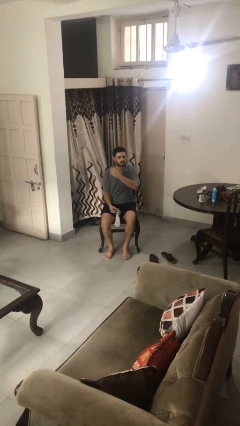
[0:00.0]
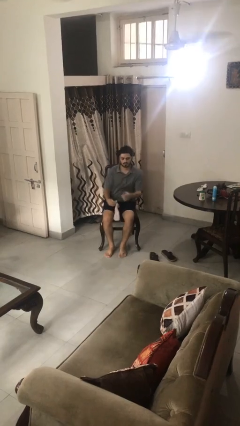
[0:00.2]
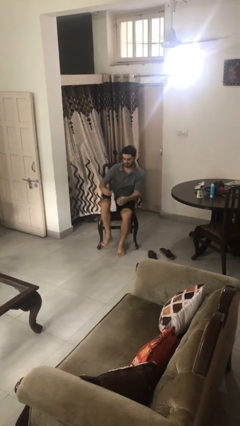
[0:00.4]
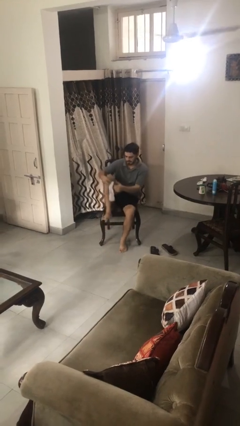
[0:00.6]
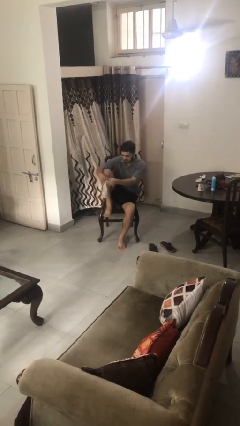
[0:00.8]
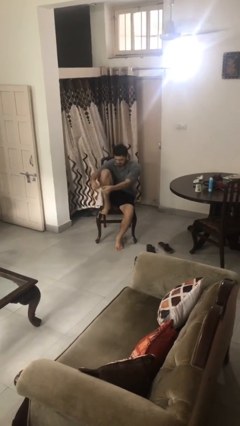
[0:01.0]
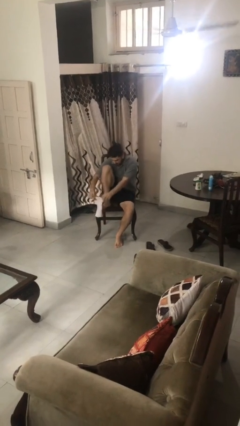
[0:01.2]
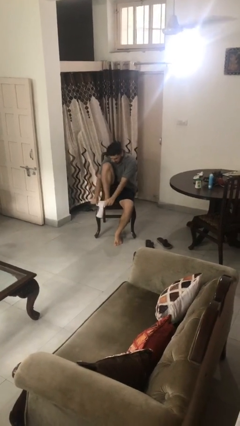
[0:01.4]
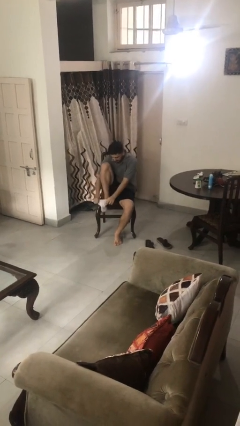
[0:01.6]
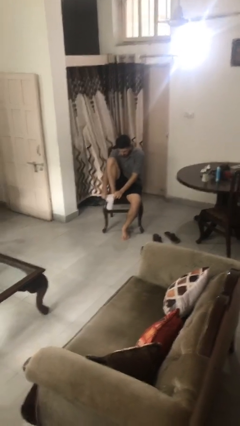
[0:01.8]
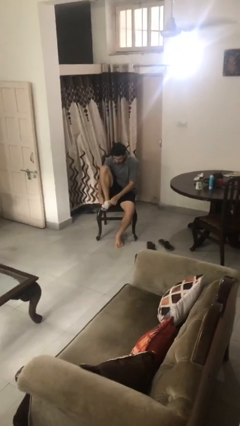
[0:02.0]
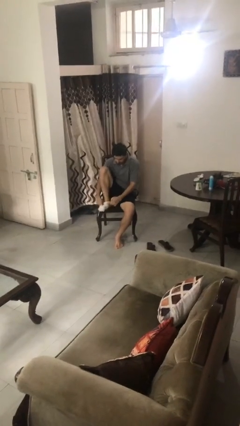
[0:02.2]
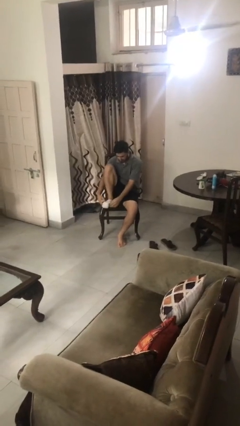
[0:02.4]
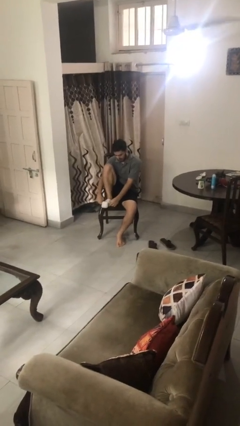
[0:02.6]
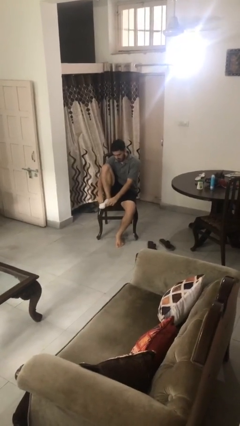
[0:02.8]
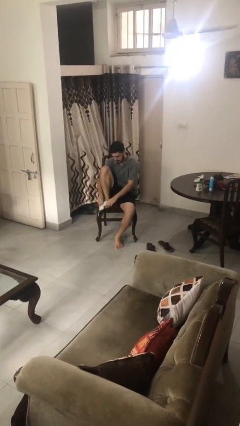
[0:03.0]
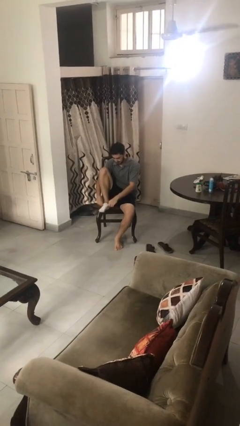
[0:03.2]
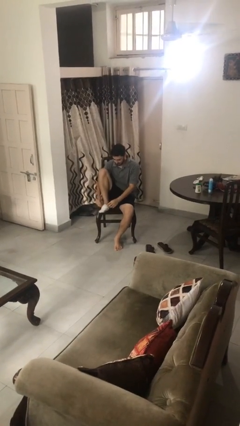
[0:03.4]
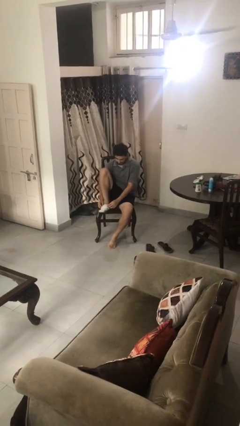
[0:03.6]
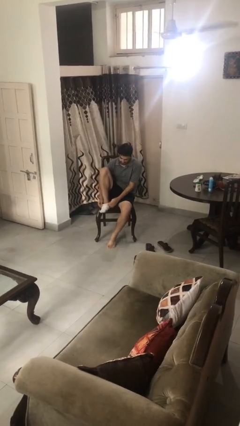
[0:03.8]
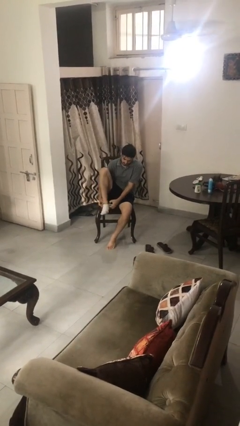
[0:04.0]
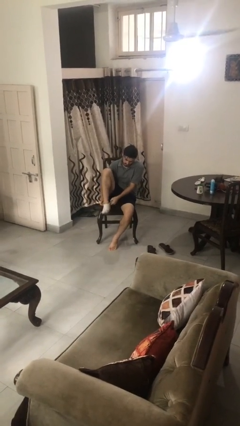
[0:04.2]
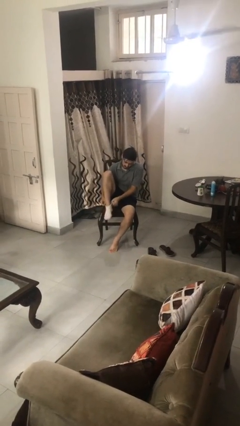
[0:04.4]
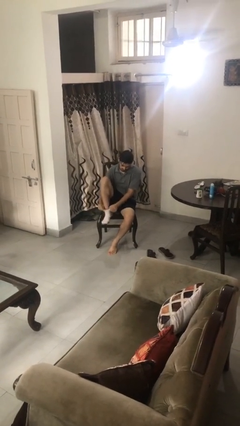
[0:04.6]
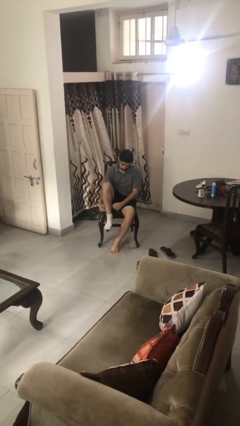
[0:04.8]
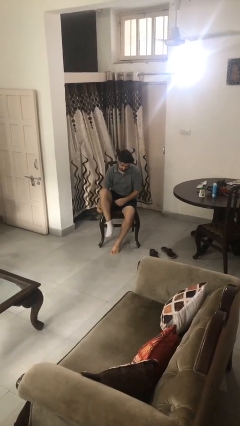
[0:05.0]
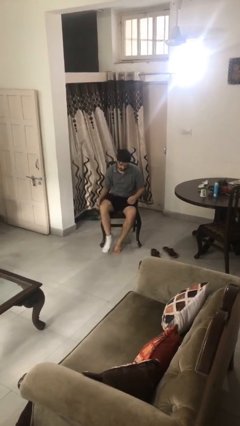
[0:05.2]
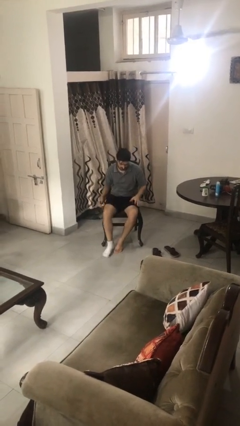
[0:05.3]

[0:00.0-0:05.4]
person puts on socks

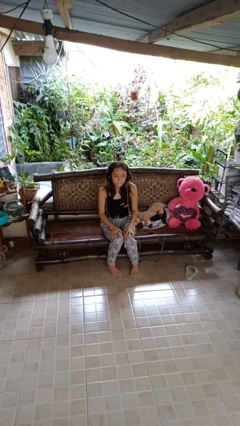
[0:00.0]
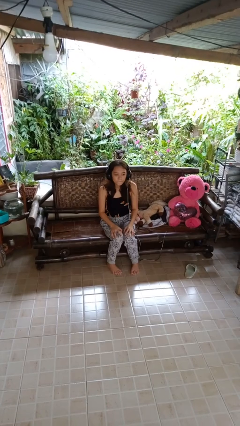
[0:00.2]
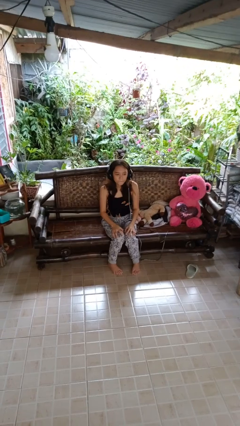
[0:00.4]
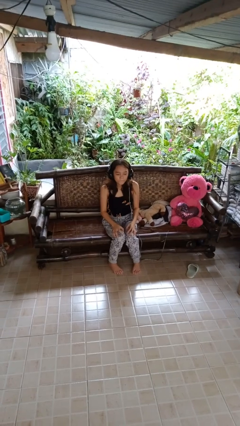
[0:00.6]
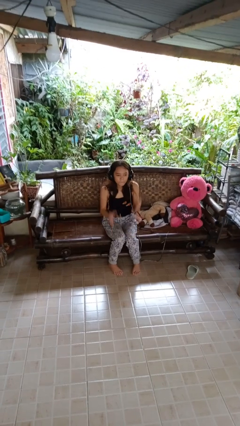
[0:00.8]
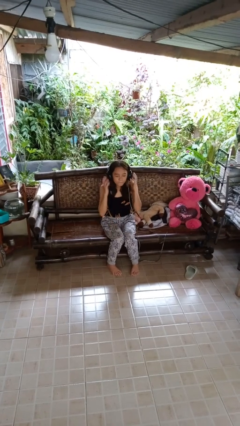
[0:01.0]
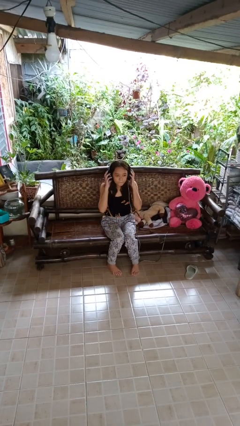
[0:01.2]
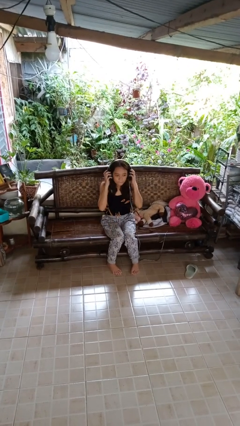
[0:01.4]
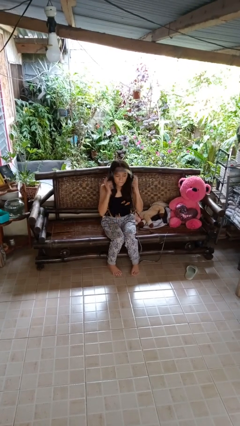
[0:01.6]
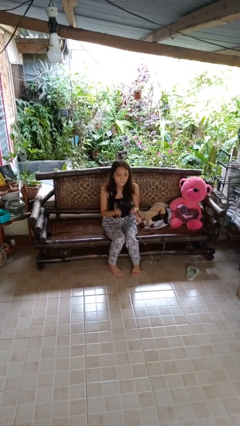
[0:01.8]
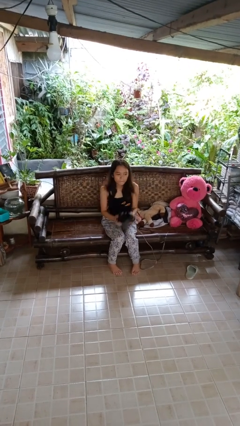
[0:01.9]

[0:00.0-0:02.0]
person takes off headphones

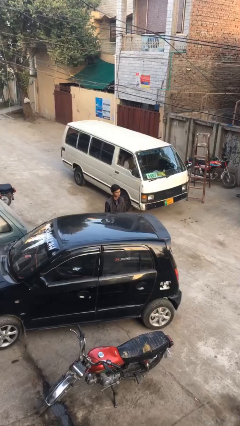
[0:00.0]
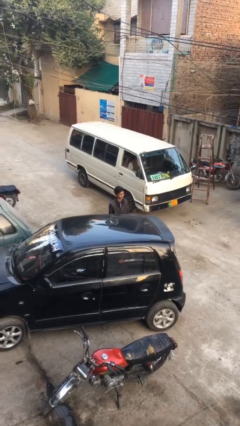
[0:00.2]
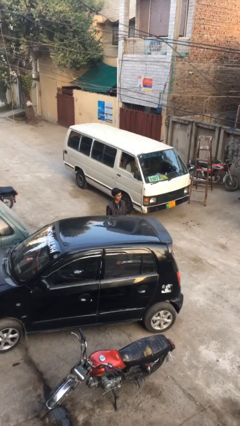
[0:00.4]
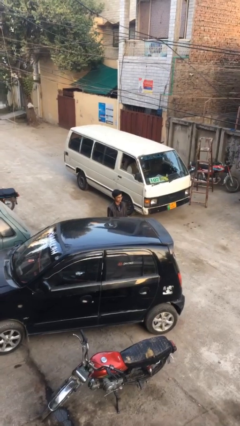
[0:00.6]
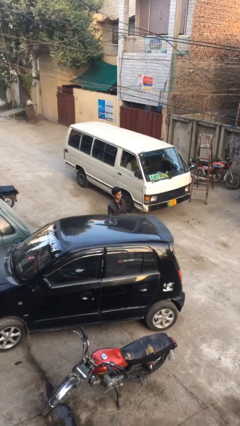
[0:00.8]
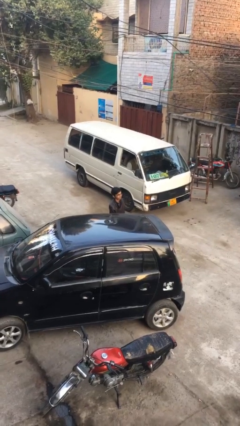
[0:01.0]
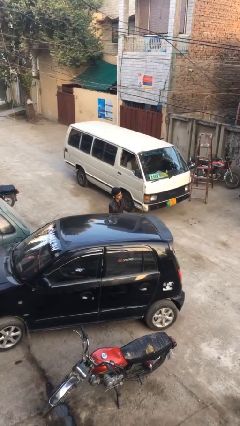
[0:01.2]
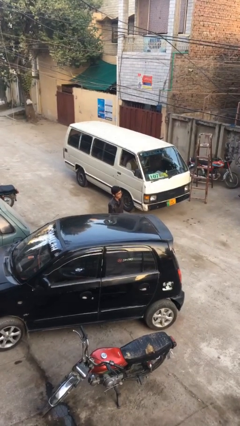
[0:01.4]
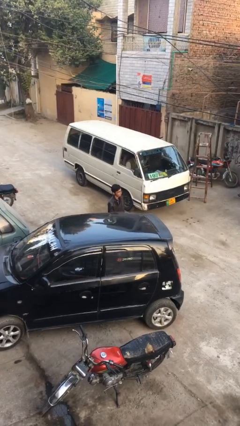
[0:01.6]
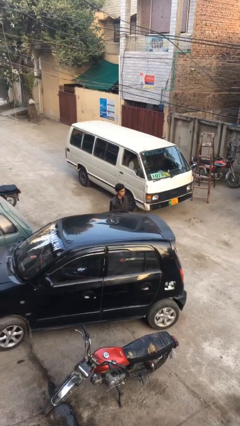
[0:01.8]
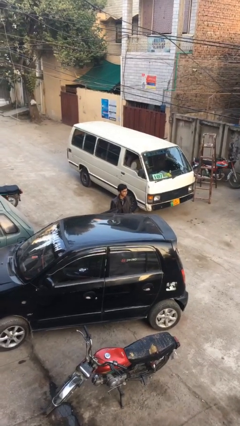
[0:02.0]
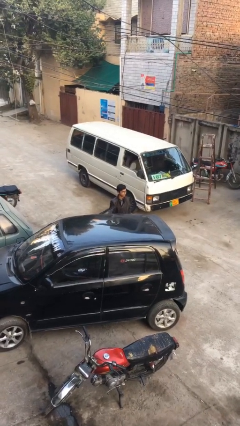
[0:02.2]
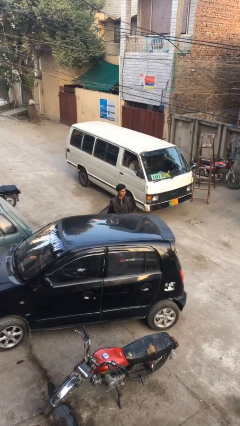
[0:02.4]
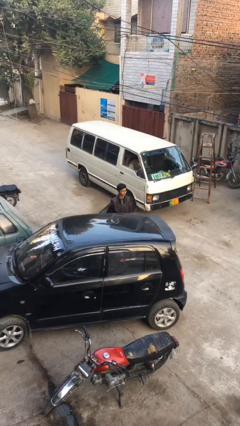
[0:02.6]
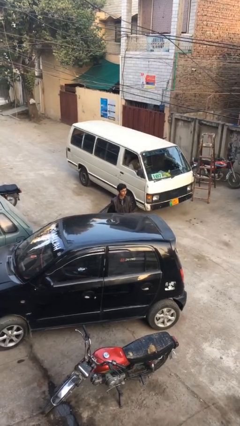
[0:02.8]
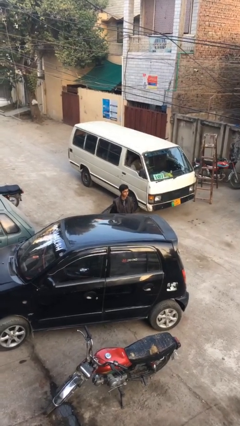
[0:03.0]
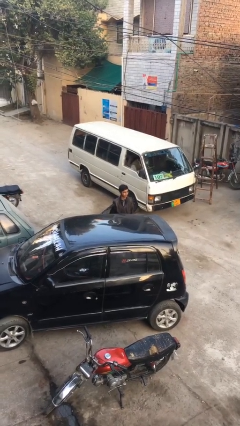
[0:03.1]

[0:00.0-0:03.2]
person opens car door

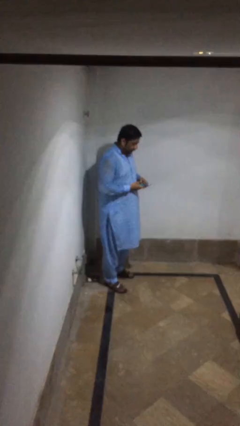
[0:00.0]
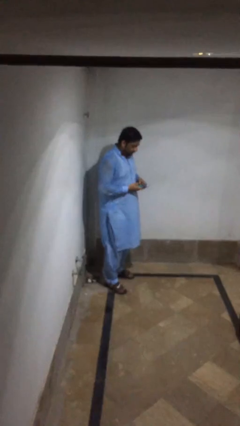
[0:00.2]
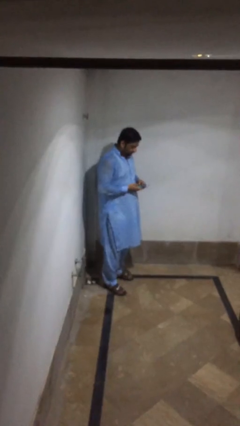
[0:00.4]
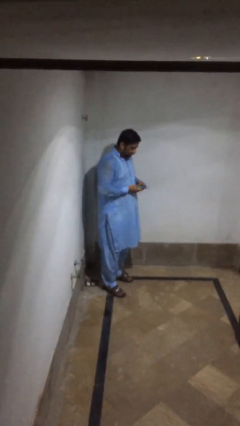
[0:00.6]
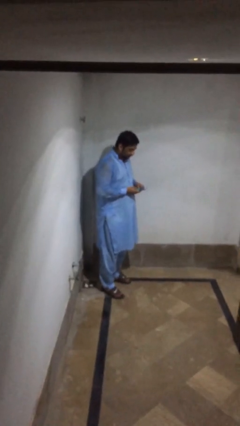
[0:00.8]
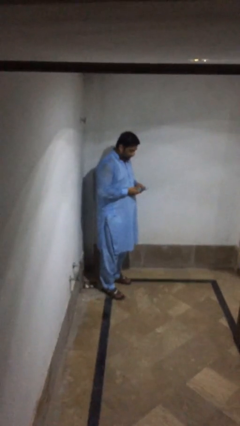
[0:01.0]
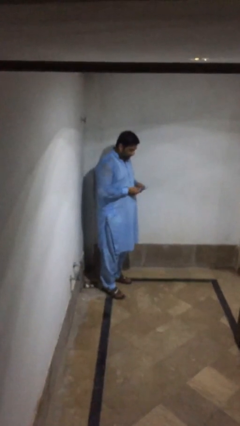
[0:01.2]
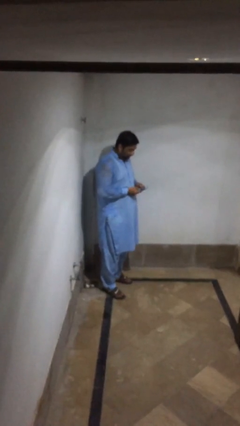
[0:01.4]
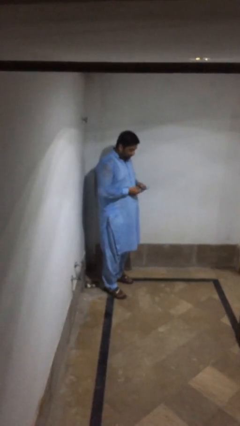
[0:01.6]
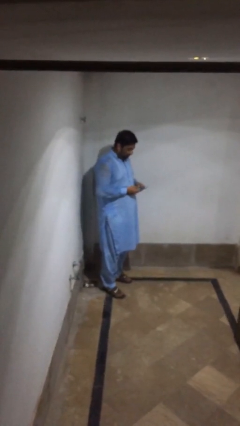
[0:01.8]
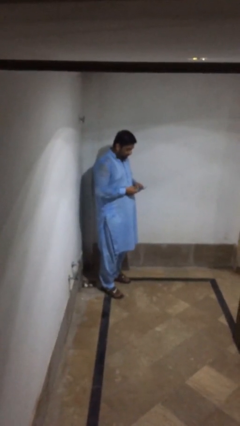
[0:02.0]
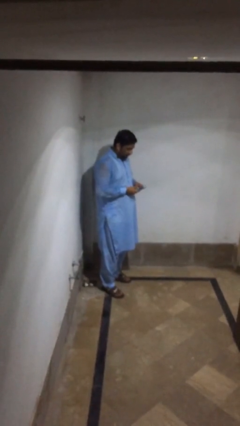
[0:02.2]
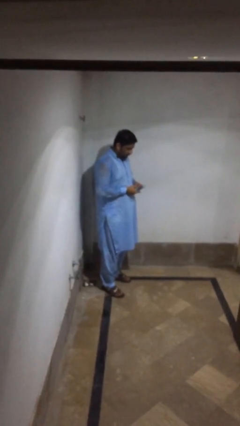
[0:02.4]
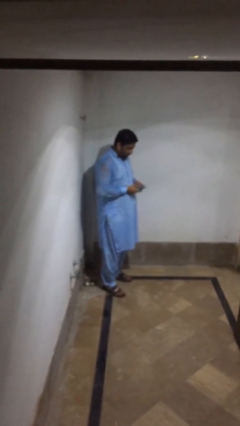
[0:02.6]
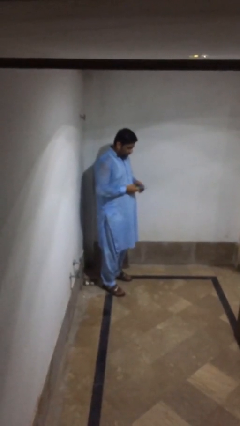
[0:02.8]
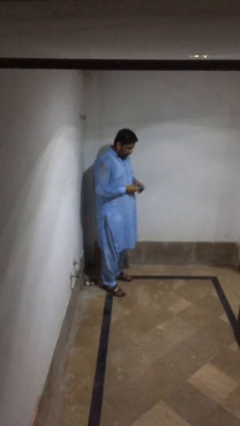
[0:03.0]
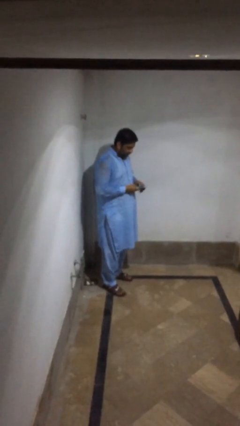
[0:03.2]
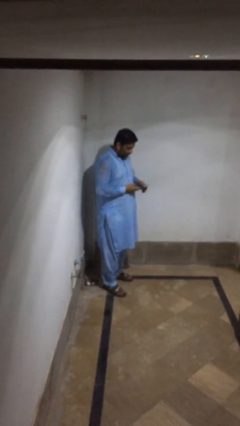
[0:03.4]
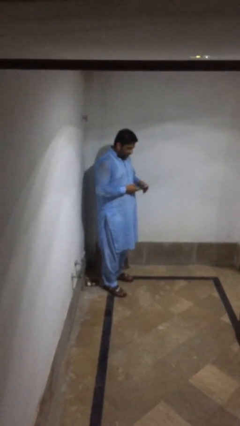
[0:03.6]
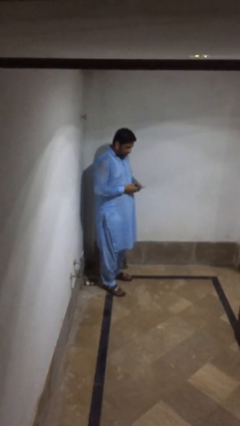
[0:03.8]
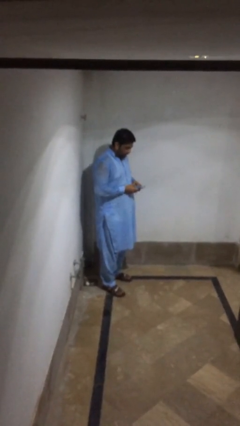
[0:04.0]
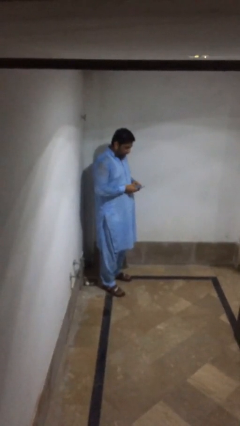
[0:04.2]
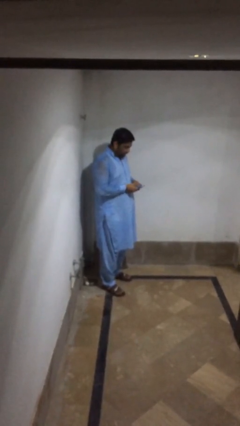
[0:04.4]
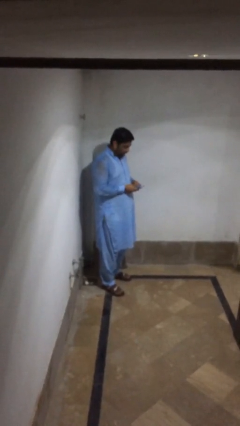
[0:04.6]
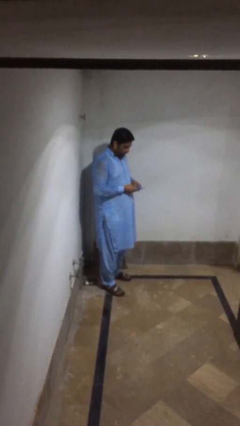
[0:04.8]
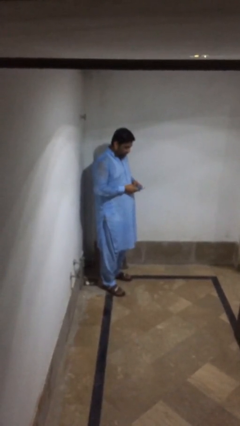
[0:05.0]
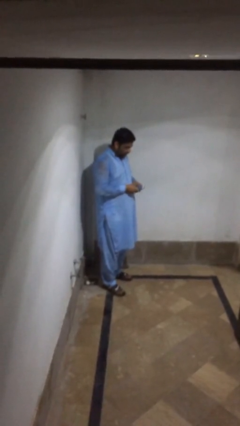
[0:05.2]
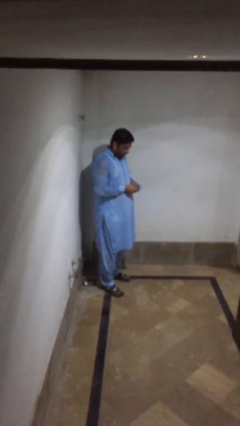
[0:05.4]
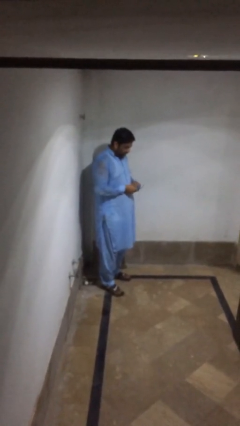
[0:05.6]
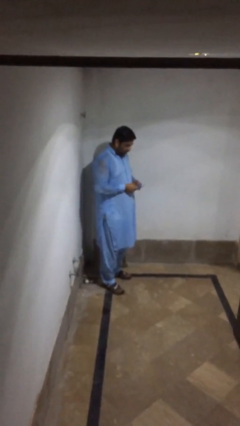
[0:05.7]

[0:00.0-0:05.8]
person texts on phone

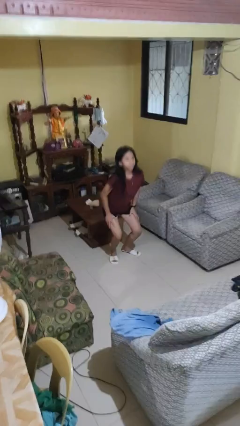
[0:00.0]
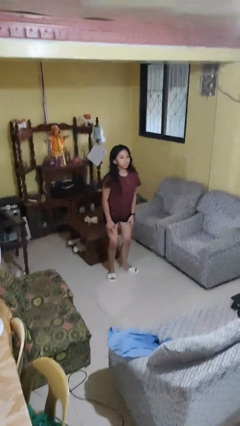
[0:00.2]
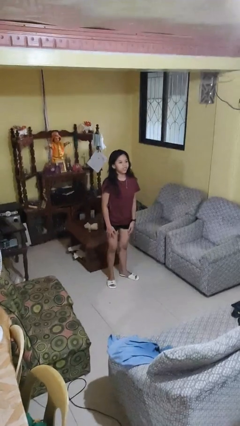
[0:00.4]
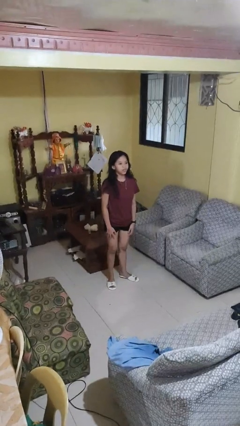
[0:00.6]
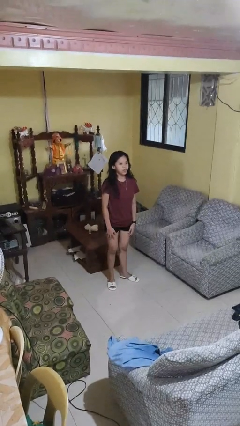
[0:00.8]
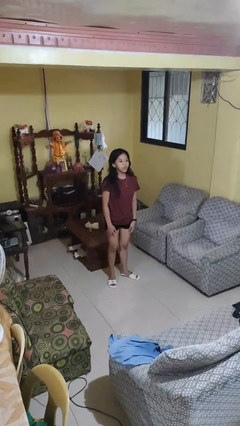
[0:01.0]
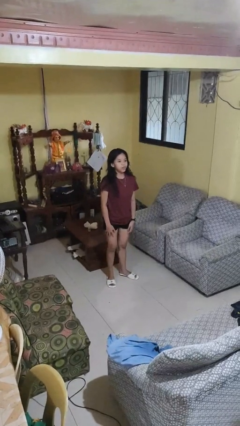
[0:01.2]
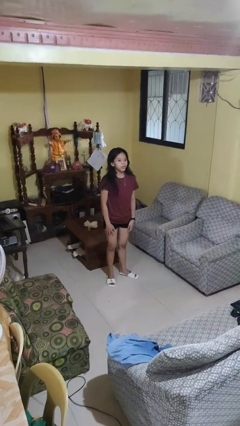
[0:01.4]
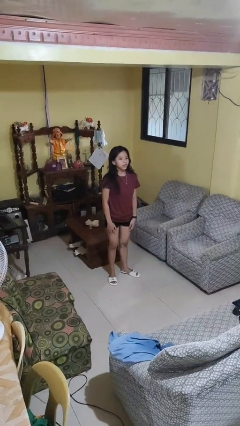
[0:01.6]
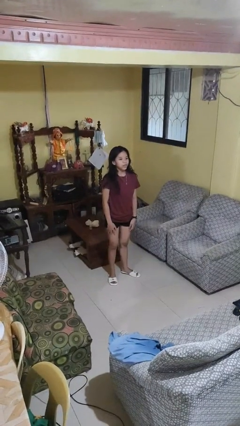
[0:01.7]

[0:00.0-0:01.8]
person stands up
